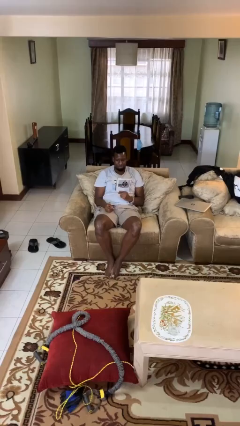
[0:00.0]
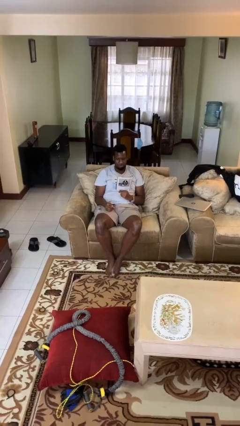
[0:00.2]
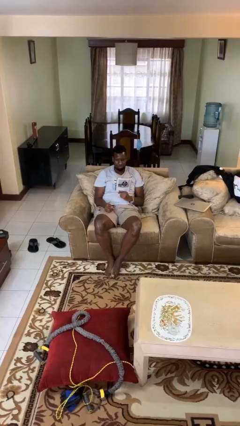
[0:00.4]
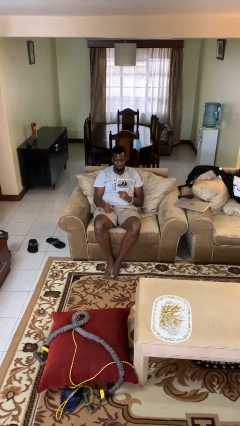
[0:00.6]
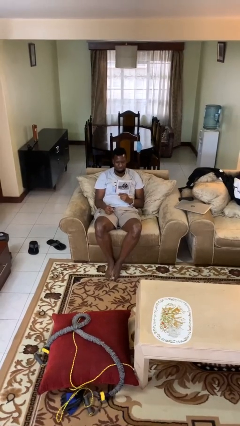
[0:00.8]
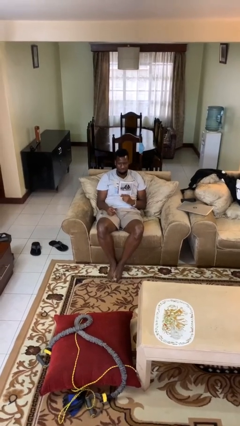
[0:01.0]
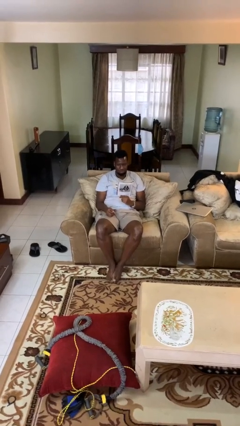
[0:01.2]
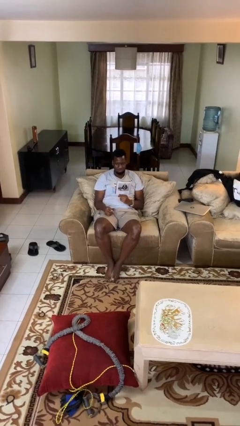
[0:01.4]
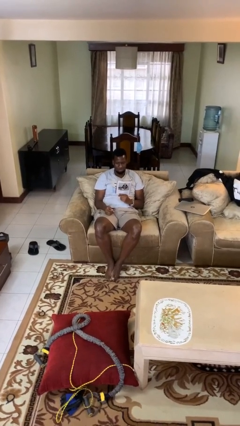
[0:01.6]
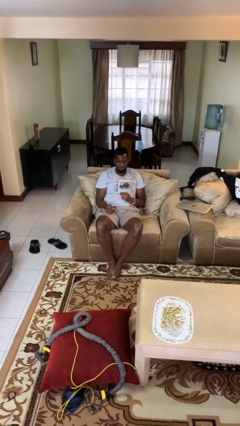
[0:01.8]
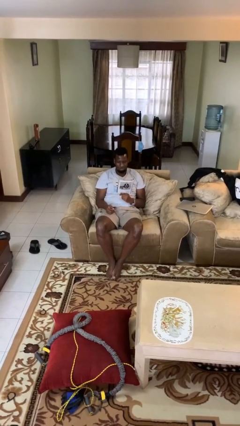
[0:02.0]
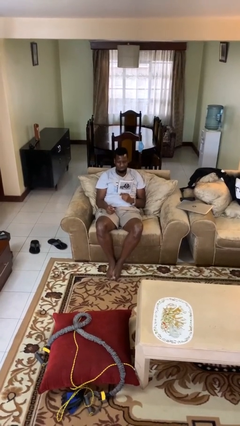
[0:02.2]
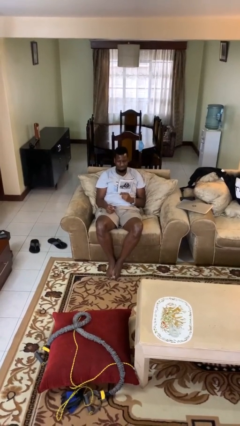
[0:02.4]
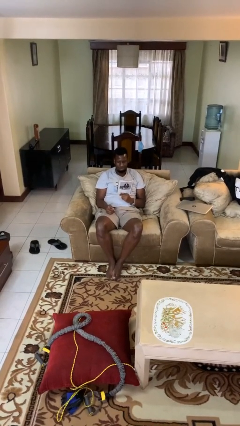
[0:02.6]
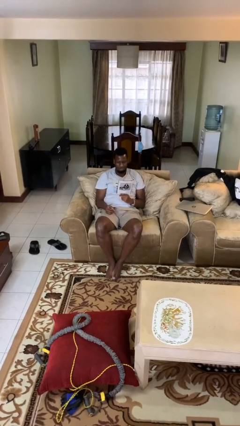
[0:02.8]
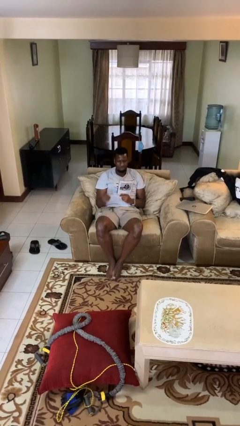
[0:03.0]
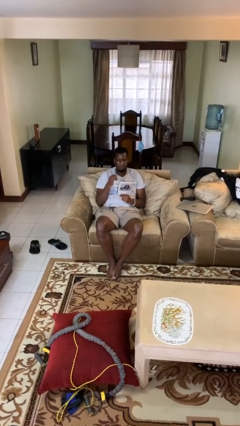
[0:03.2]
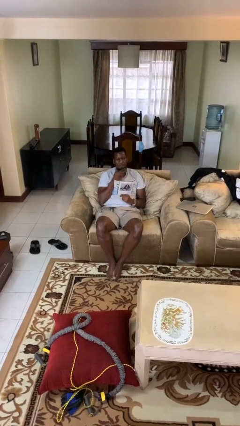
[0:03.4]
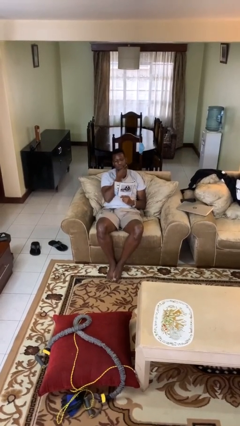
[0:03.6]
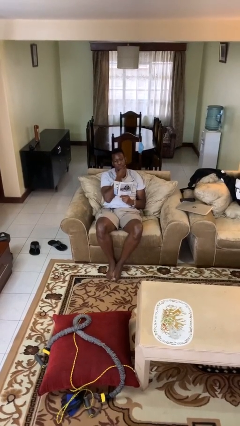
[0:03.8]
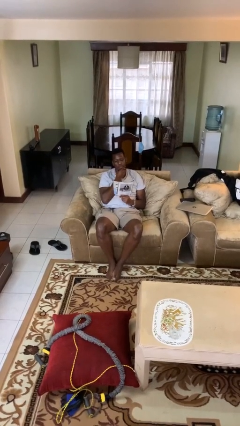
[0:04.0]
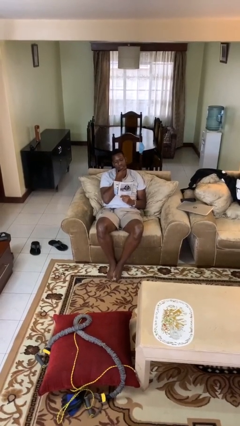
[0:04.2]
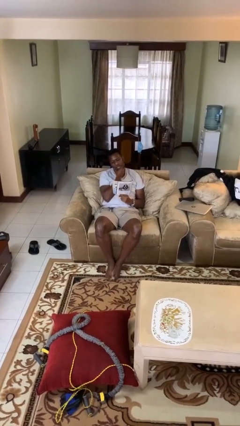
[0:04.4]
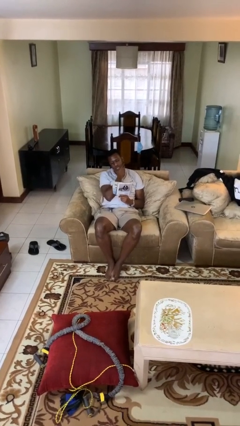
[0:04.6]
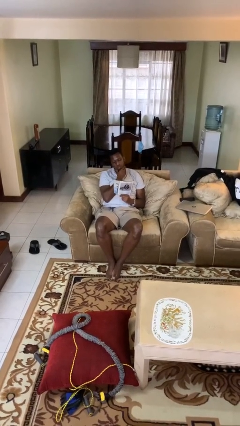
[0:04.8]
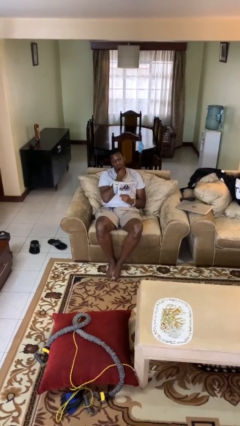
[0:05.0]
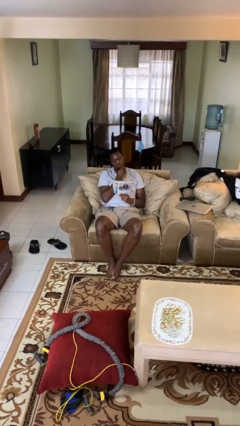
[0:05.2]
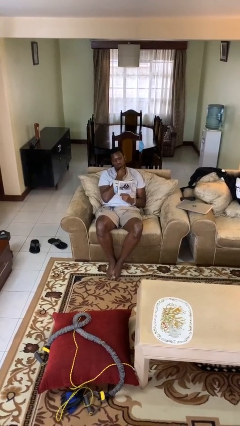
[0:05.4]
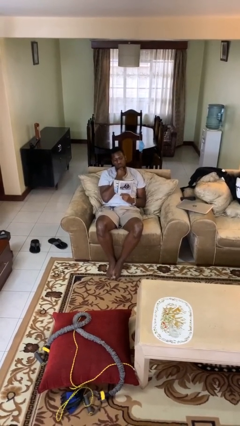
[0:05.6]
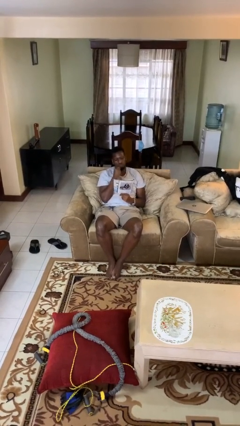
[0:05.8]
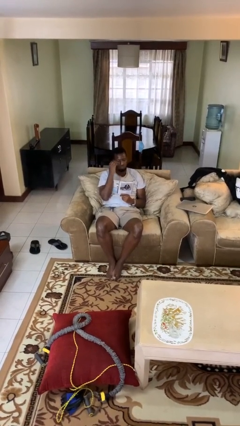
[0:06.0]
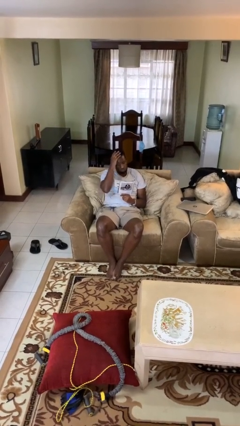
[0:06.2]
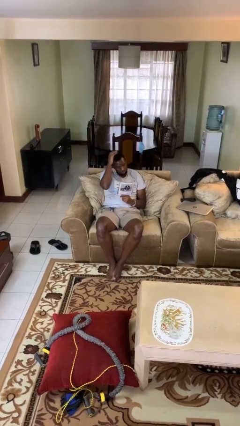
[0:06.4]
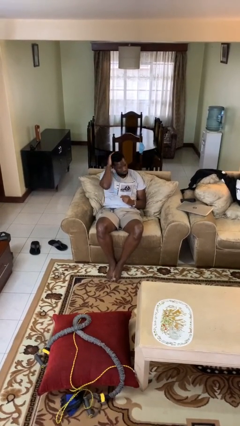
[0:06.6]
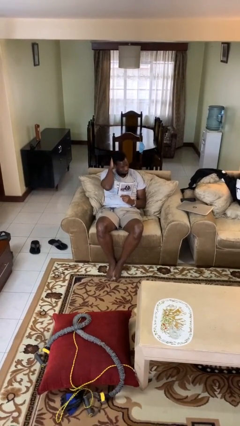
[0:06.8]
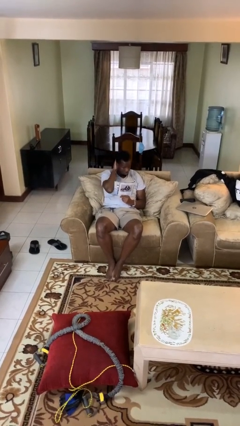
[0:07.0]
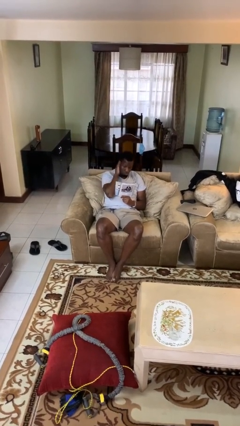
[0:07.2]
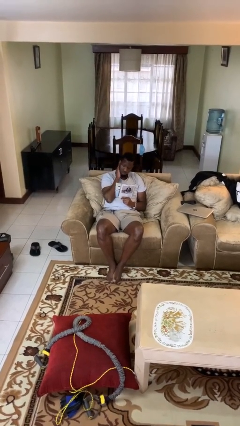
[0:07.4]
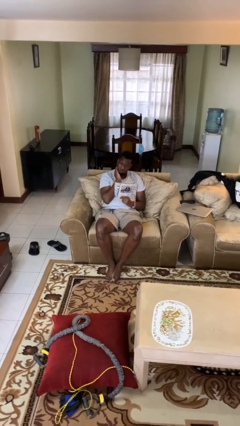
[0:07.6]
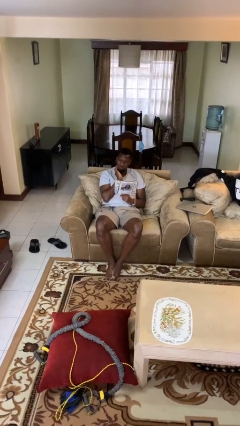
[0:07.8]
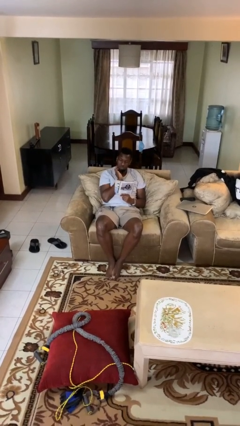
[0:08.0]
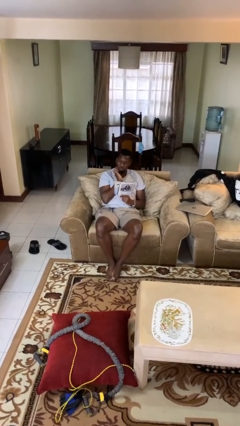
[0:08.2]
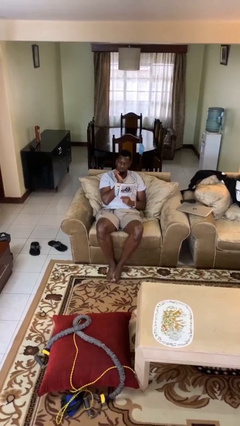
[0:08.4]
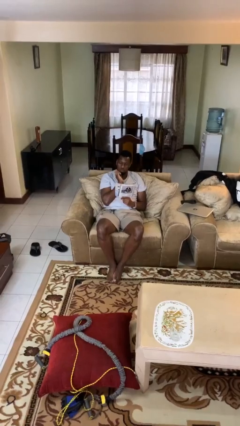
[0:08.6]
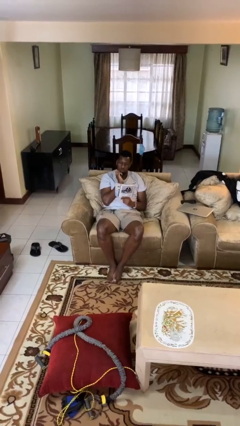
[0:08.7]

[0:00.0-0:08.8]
person reads document

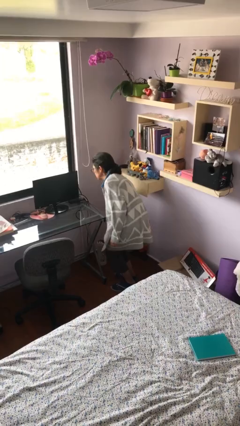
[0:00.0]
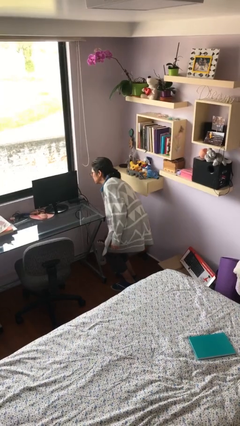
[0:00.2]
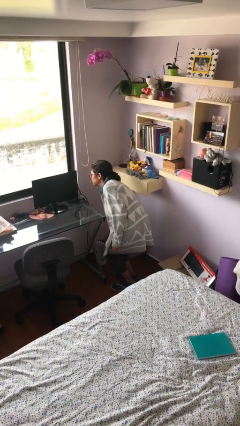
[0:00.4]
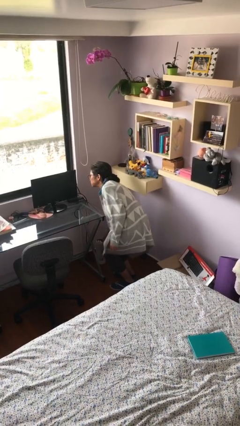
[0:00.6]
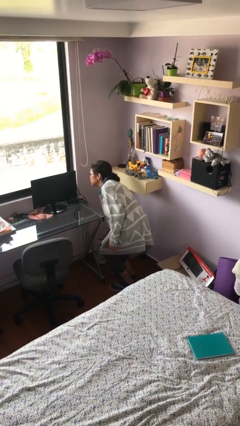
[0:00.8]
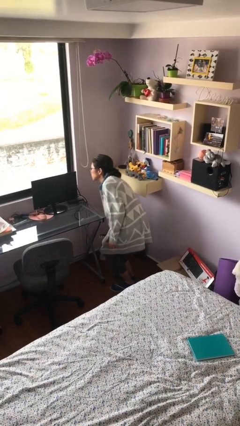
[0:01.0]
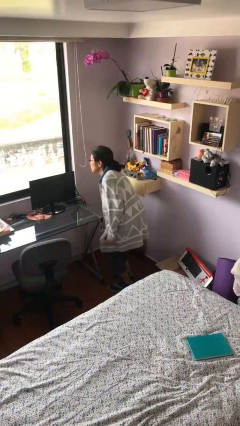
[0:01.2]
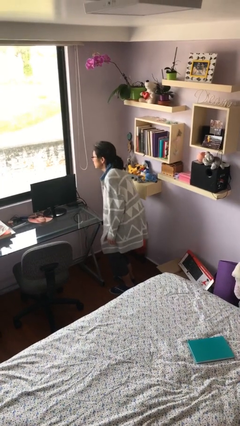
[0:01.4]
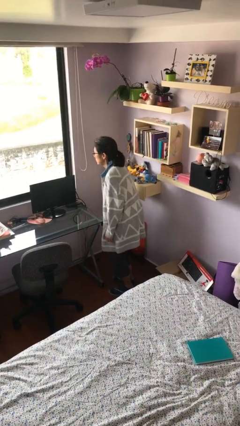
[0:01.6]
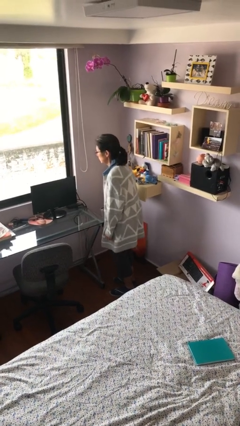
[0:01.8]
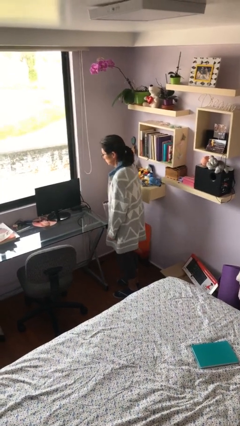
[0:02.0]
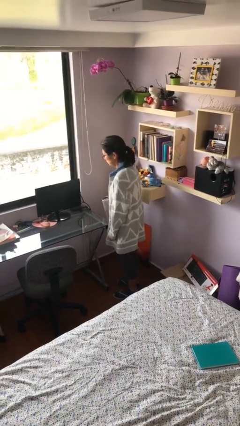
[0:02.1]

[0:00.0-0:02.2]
person picks up object from floor

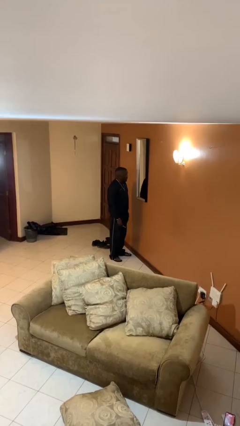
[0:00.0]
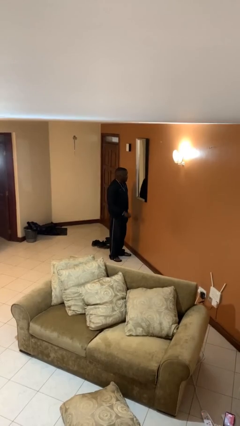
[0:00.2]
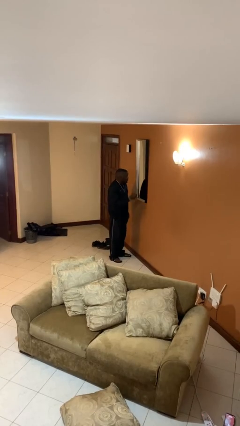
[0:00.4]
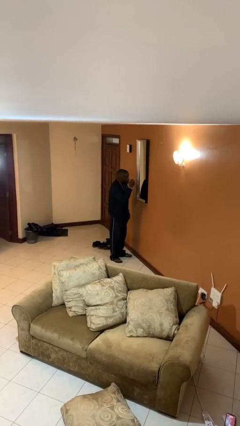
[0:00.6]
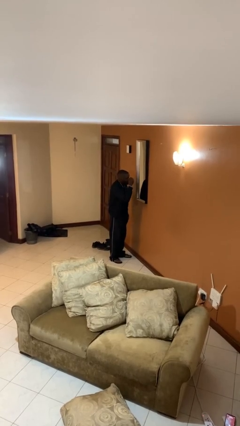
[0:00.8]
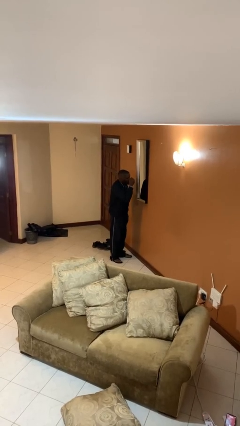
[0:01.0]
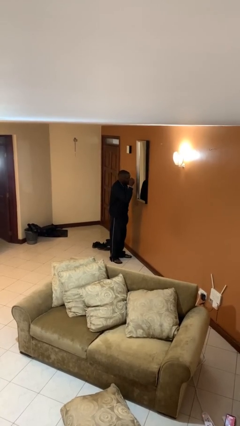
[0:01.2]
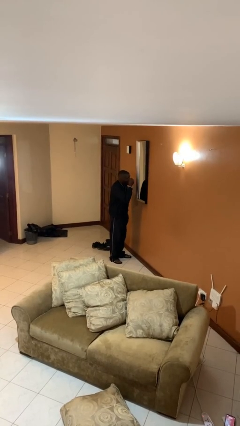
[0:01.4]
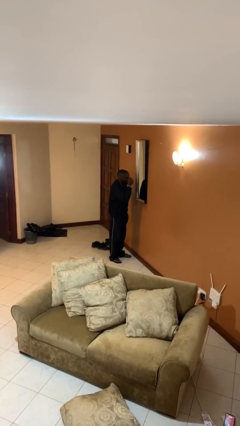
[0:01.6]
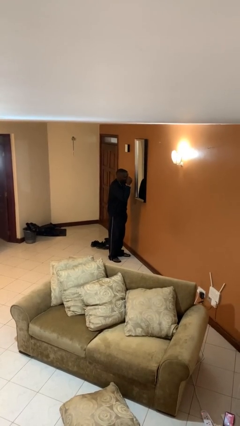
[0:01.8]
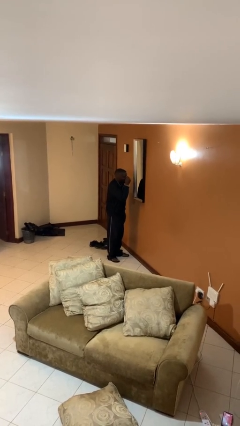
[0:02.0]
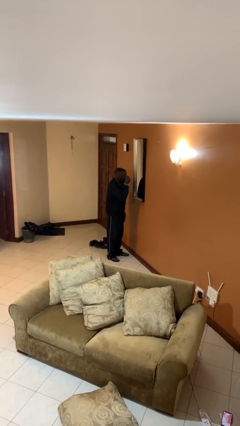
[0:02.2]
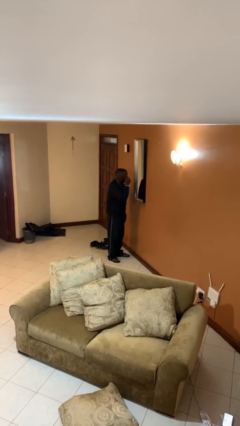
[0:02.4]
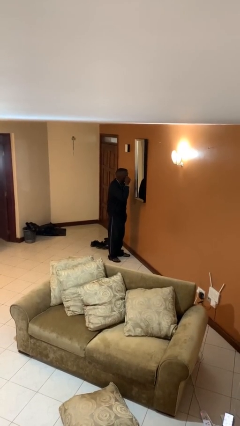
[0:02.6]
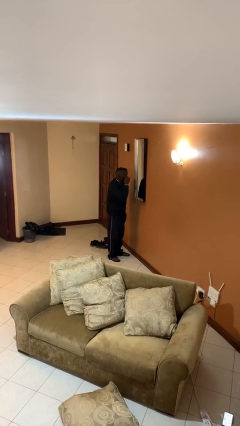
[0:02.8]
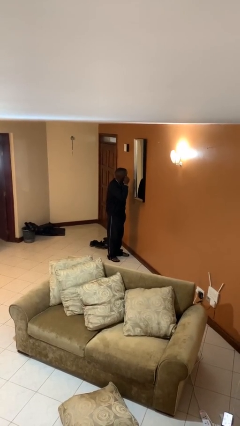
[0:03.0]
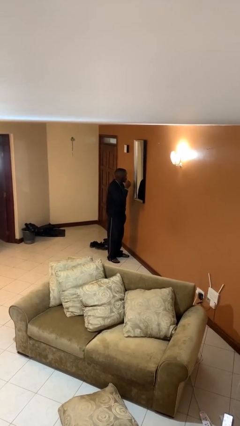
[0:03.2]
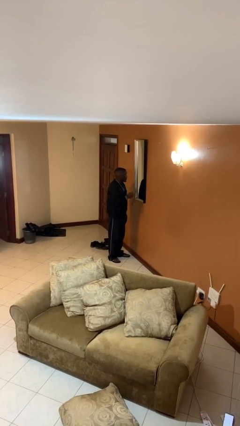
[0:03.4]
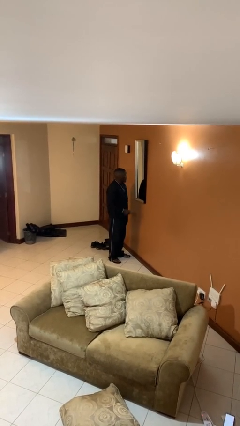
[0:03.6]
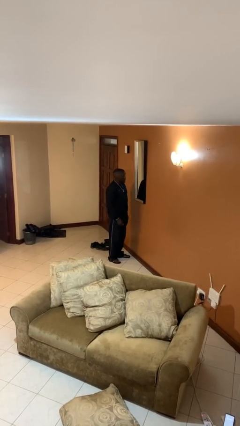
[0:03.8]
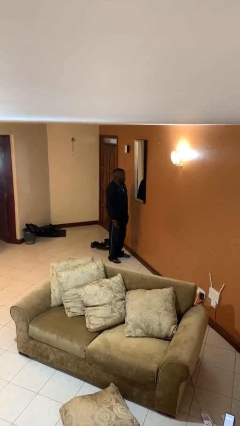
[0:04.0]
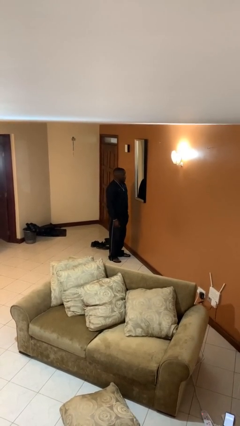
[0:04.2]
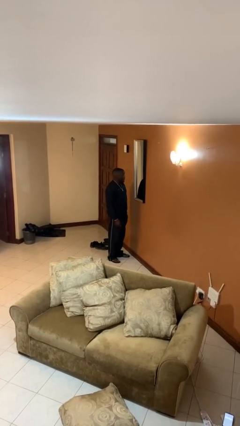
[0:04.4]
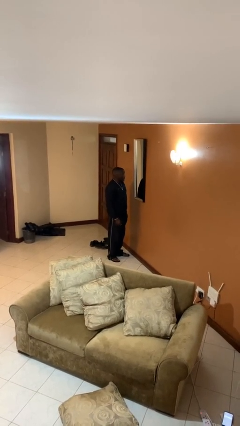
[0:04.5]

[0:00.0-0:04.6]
person applies eye makeup

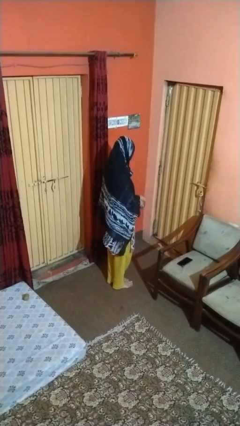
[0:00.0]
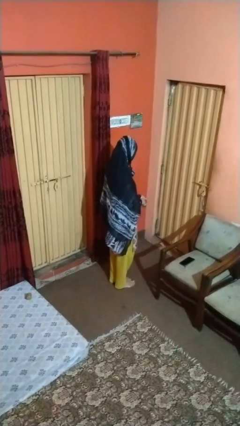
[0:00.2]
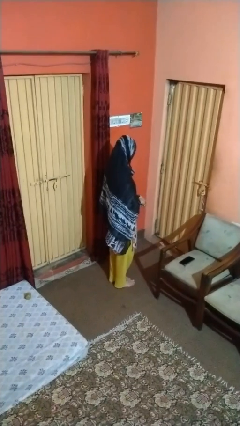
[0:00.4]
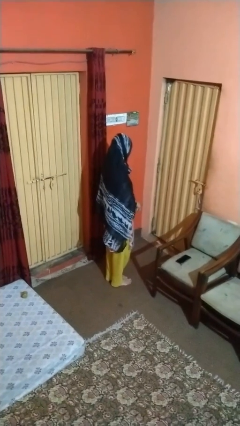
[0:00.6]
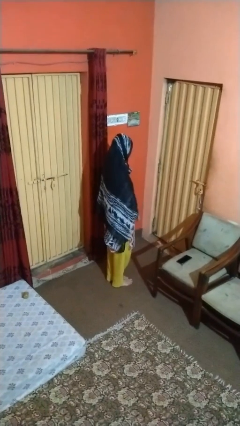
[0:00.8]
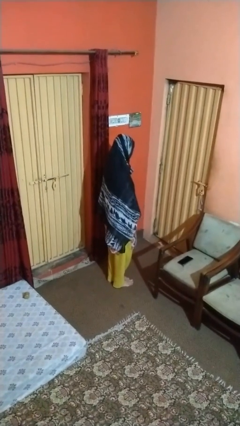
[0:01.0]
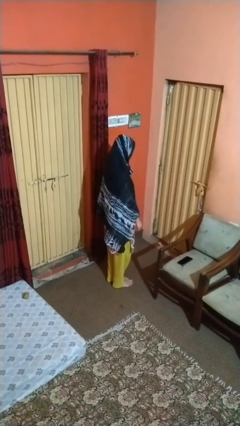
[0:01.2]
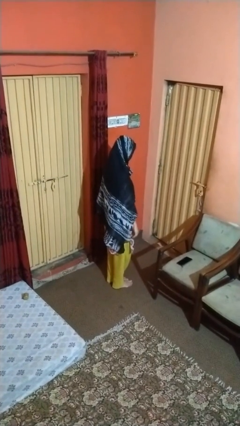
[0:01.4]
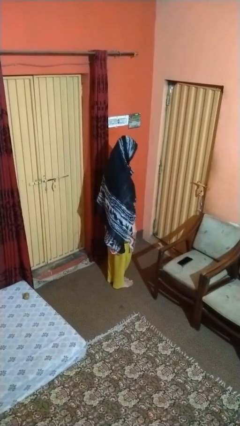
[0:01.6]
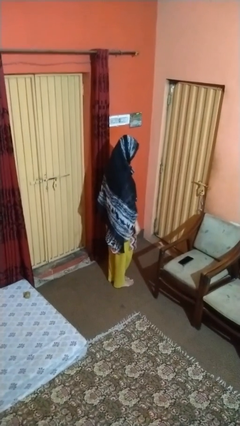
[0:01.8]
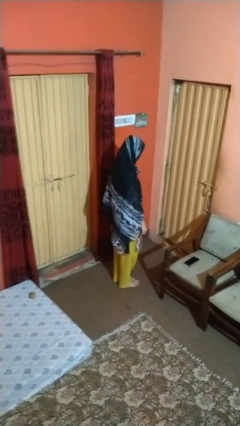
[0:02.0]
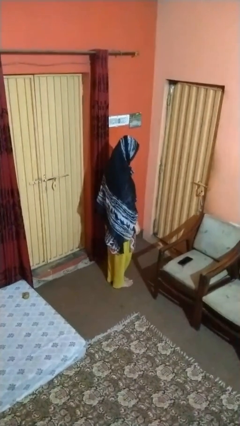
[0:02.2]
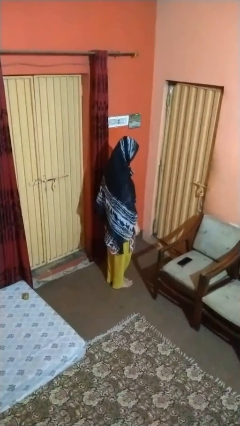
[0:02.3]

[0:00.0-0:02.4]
person takes off wristwatch
